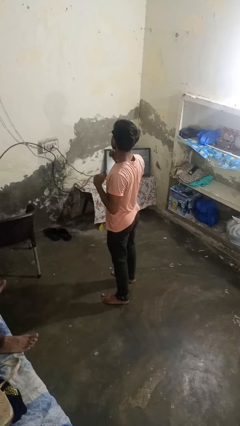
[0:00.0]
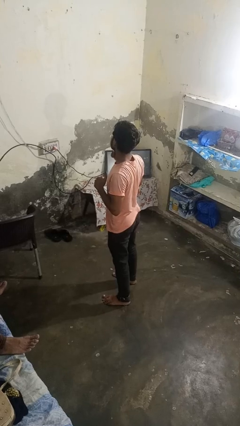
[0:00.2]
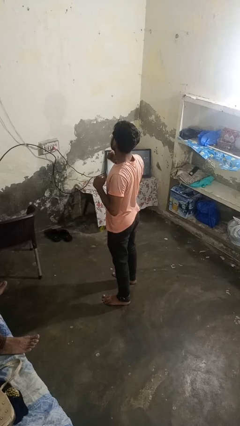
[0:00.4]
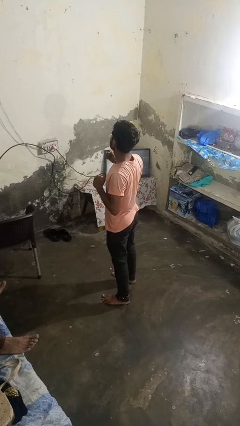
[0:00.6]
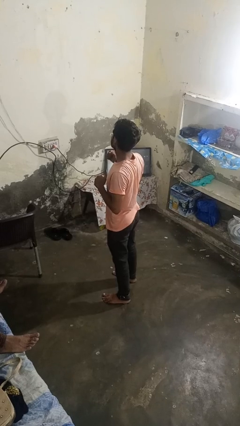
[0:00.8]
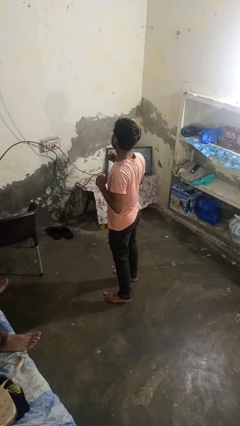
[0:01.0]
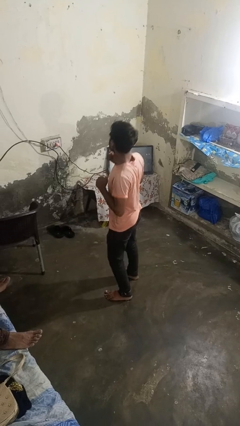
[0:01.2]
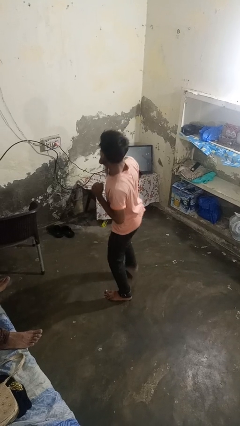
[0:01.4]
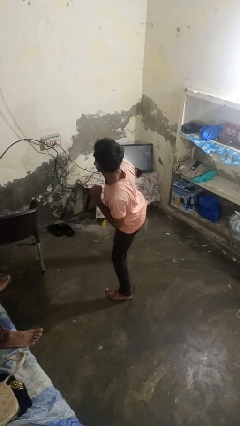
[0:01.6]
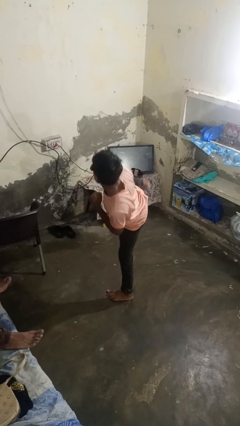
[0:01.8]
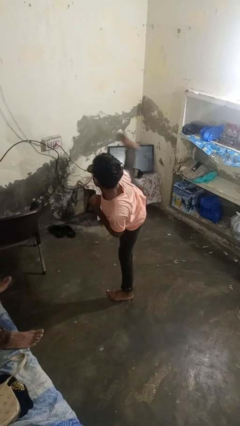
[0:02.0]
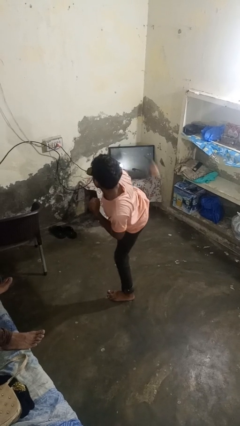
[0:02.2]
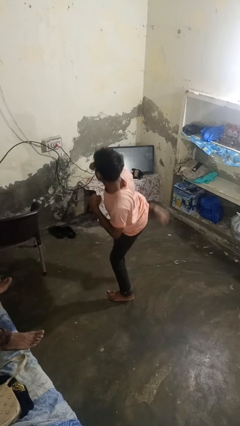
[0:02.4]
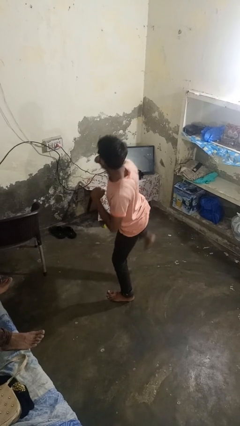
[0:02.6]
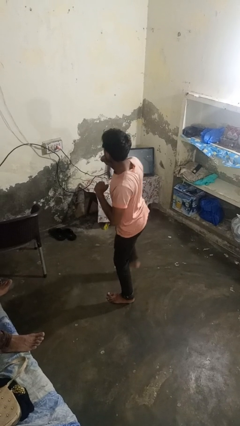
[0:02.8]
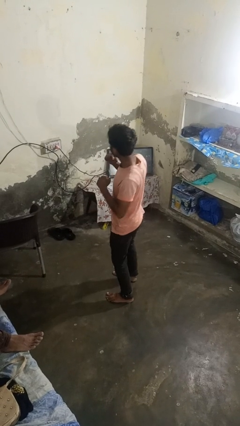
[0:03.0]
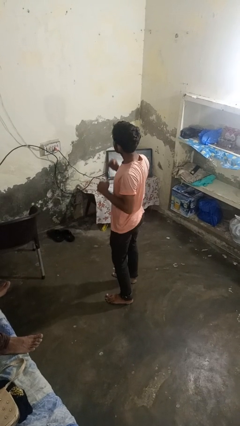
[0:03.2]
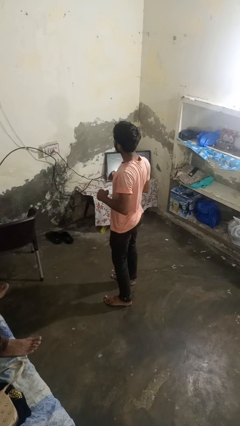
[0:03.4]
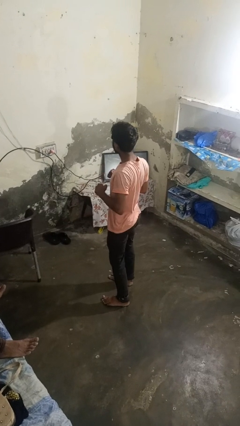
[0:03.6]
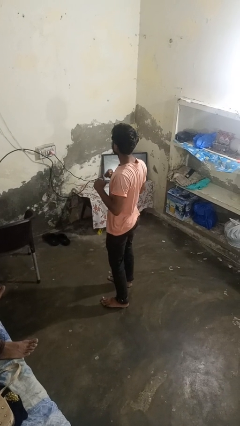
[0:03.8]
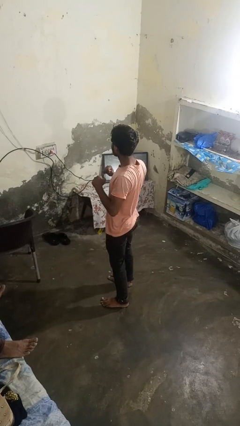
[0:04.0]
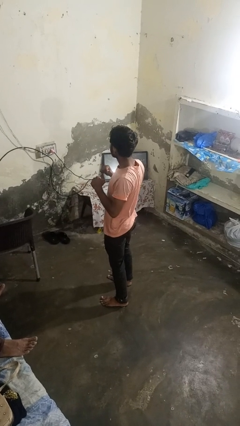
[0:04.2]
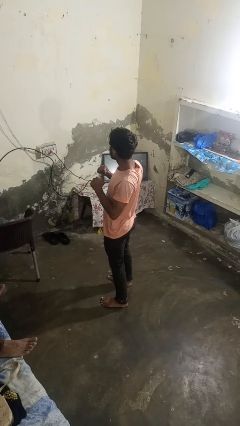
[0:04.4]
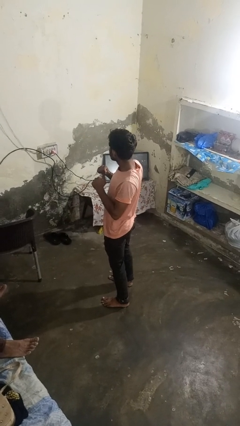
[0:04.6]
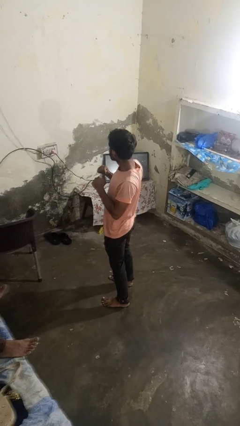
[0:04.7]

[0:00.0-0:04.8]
person karate kicks

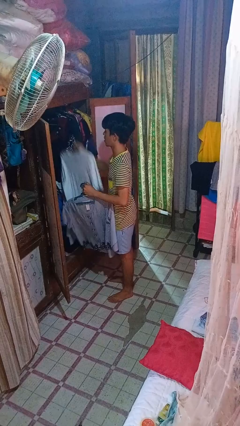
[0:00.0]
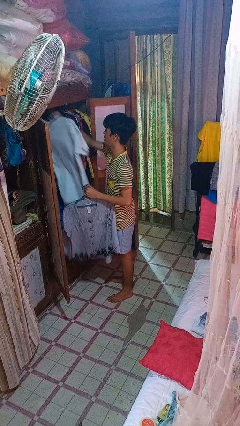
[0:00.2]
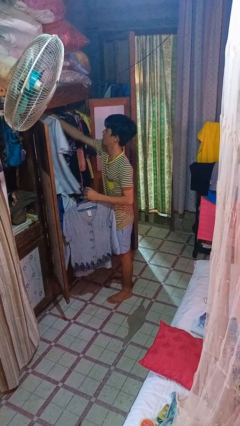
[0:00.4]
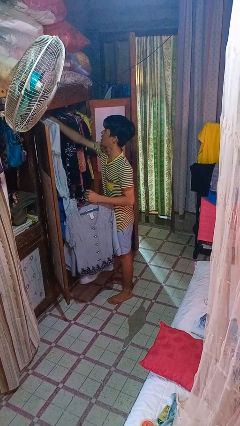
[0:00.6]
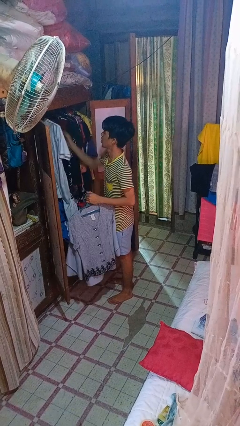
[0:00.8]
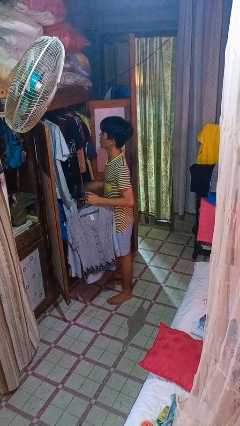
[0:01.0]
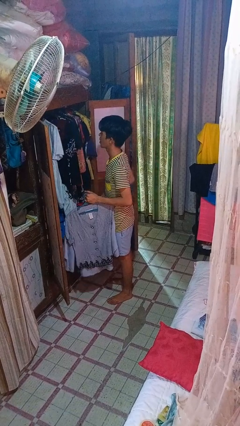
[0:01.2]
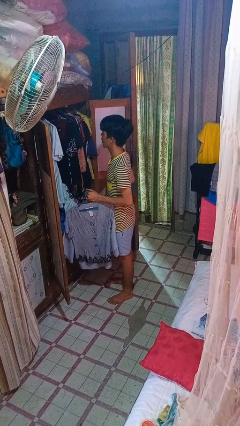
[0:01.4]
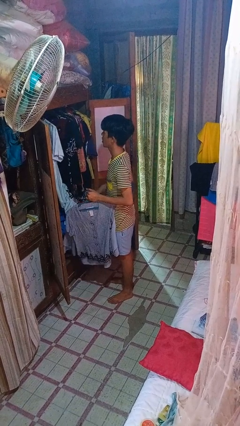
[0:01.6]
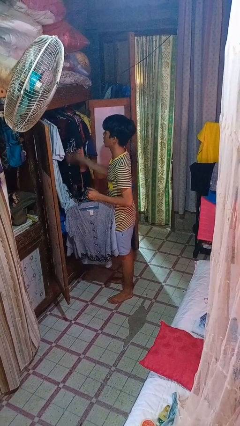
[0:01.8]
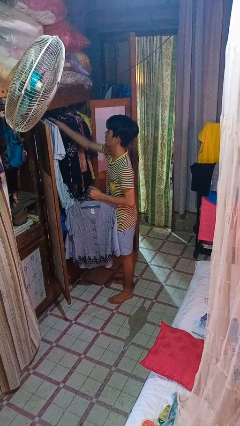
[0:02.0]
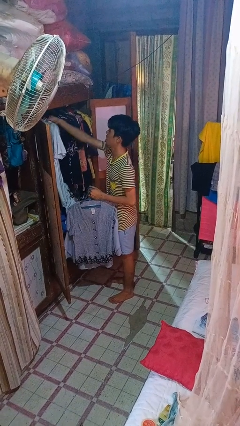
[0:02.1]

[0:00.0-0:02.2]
person puts clothes into closet

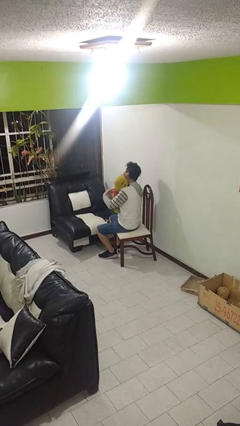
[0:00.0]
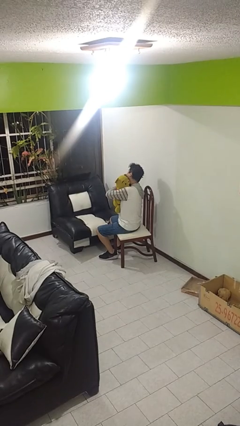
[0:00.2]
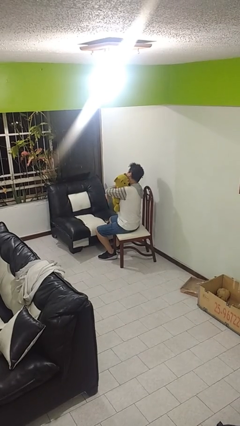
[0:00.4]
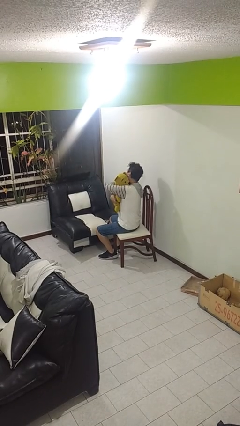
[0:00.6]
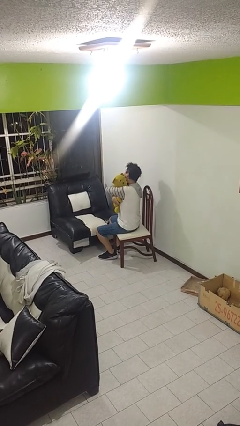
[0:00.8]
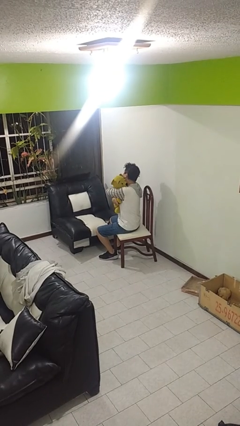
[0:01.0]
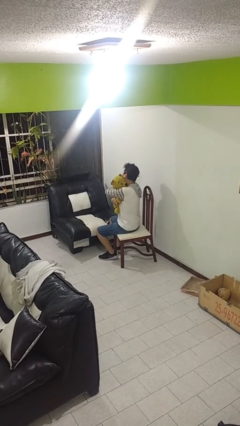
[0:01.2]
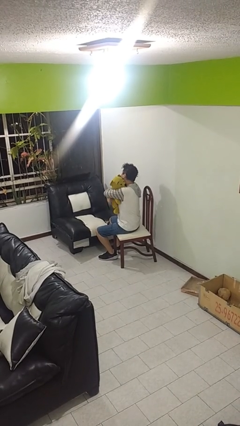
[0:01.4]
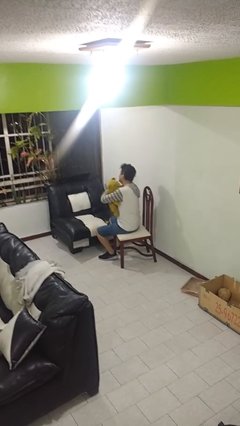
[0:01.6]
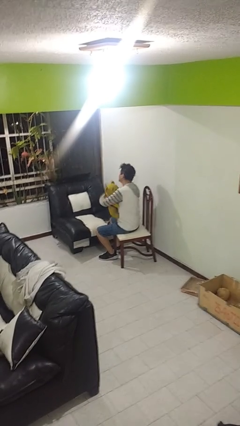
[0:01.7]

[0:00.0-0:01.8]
person hugs stuffed animal

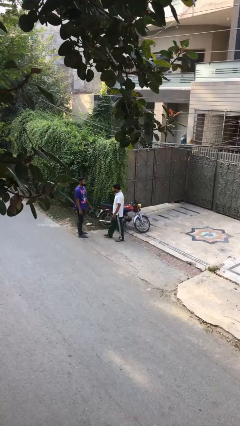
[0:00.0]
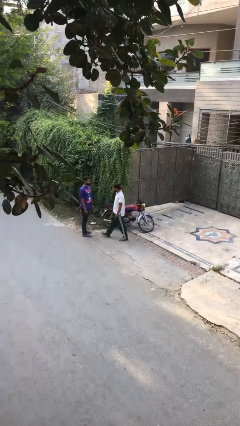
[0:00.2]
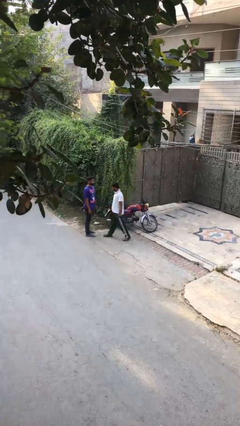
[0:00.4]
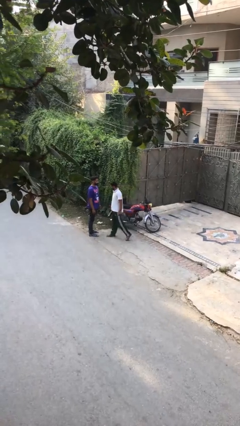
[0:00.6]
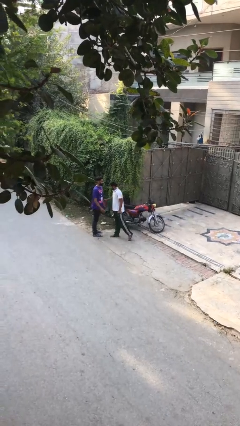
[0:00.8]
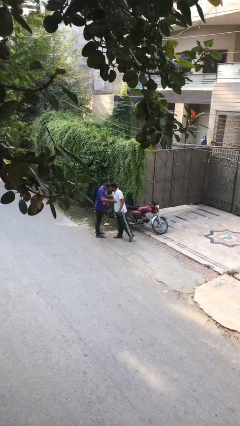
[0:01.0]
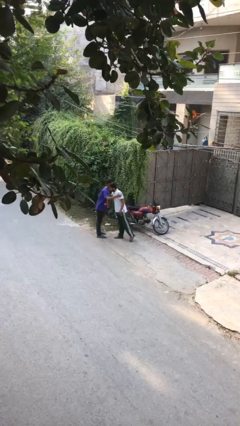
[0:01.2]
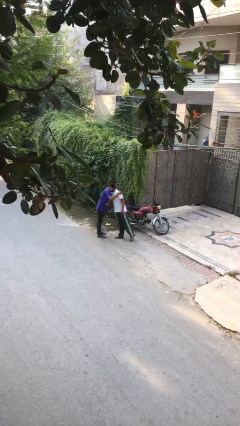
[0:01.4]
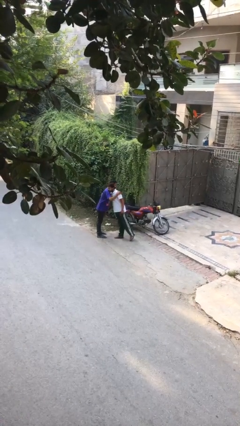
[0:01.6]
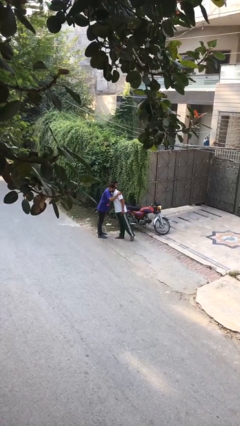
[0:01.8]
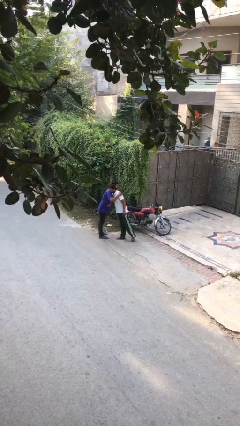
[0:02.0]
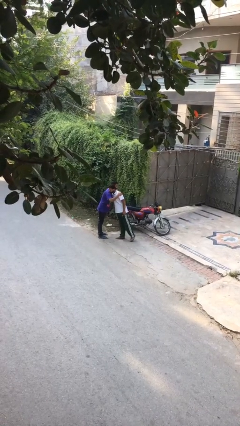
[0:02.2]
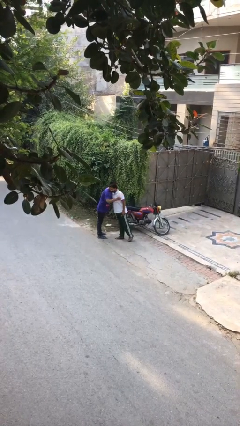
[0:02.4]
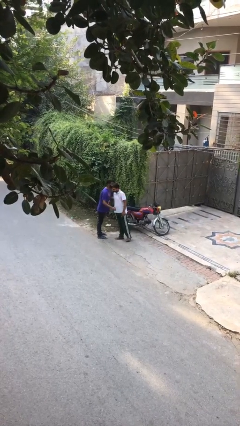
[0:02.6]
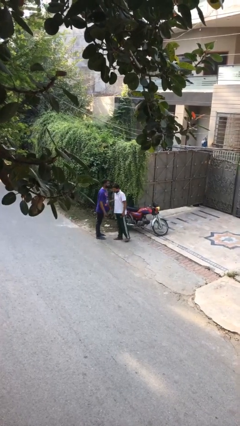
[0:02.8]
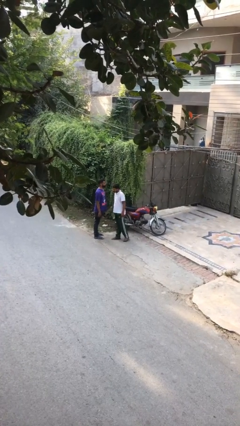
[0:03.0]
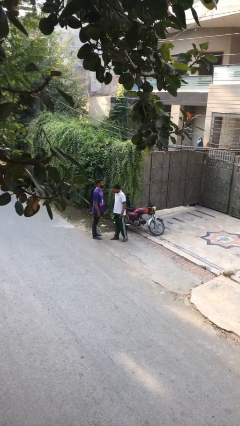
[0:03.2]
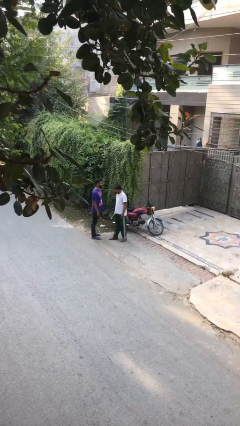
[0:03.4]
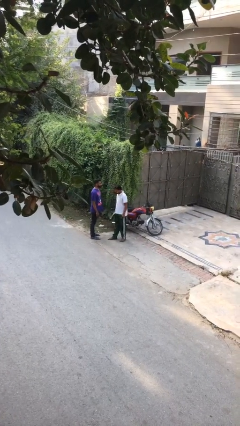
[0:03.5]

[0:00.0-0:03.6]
person embraces person

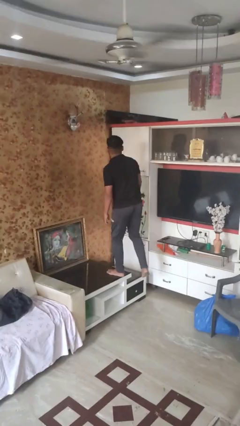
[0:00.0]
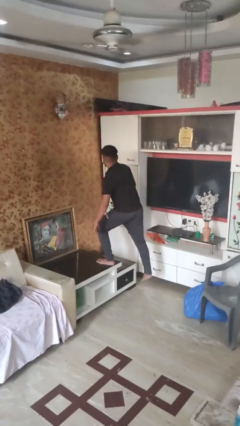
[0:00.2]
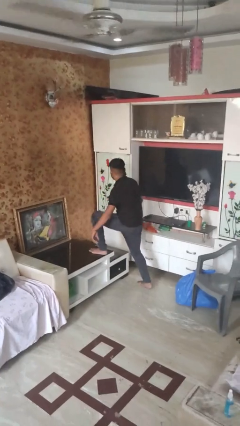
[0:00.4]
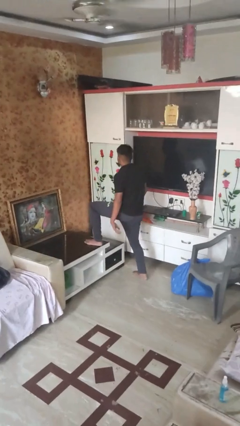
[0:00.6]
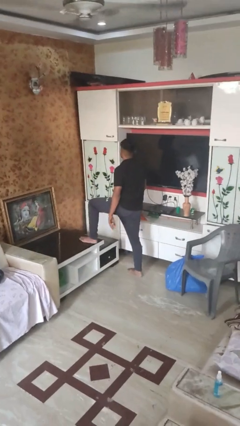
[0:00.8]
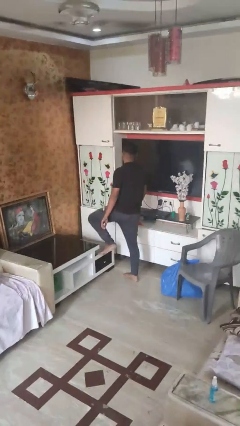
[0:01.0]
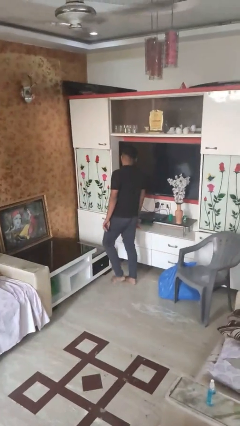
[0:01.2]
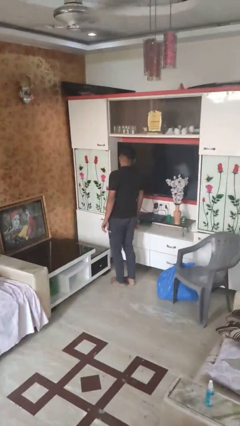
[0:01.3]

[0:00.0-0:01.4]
person climbs off table

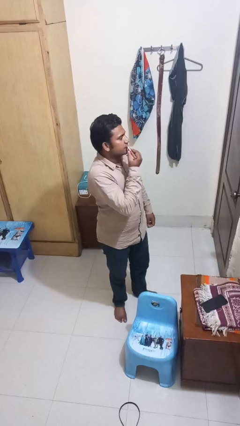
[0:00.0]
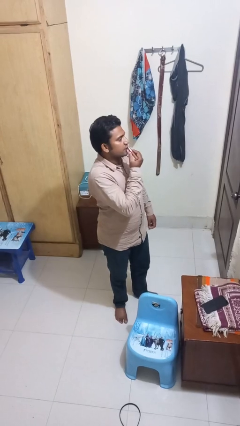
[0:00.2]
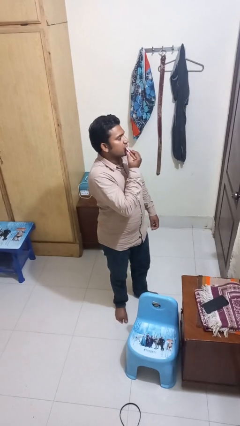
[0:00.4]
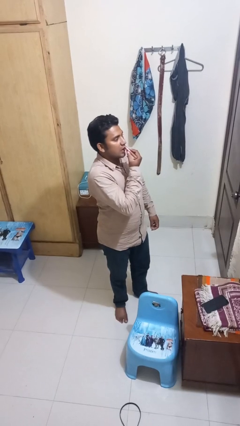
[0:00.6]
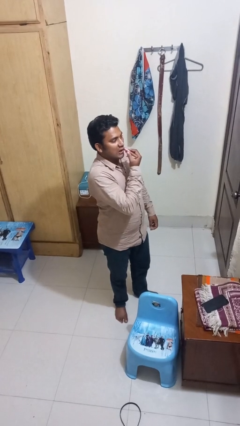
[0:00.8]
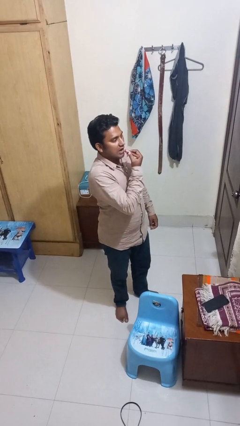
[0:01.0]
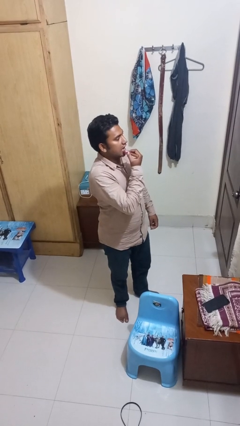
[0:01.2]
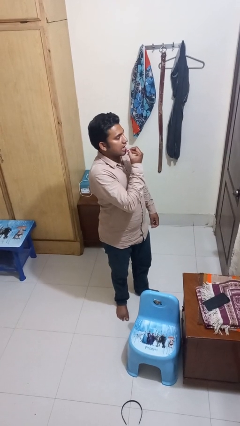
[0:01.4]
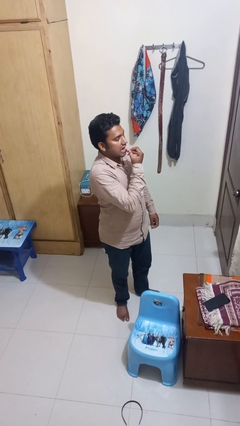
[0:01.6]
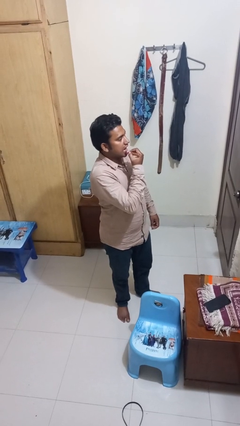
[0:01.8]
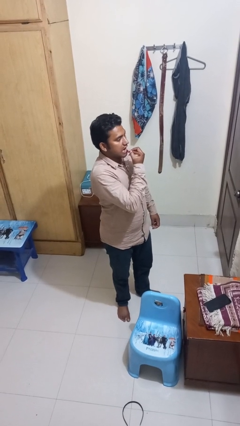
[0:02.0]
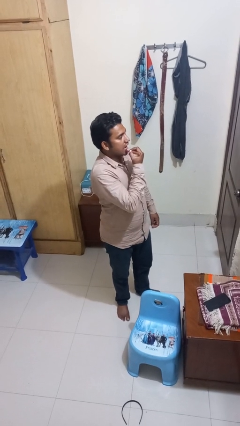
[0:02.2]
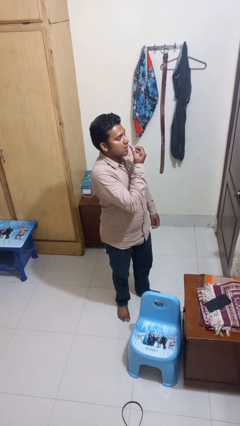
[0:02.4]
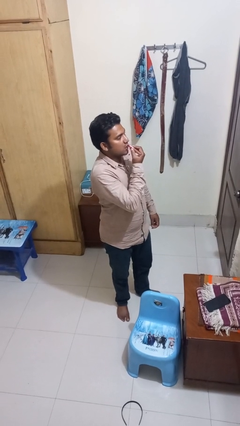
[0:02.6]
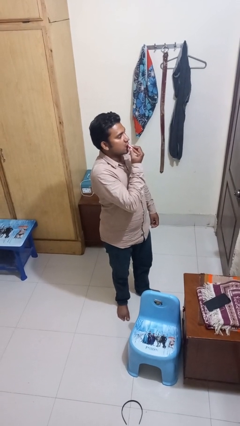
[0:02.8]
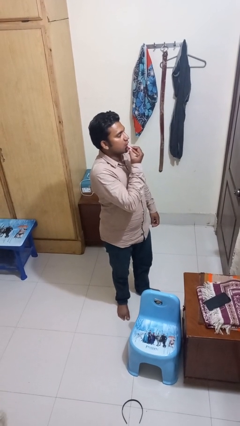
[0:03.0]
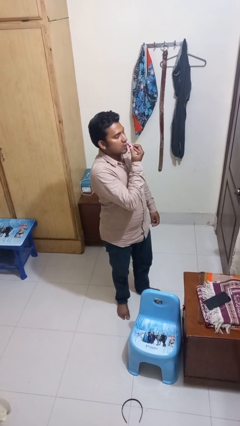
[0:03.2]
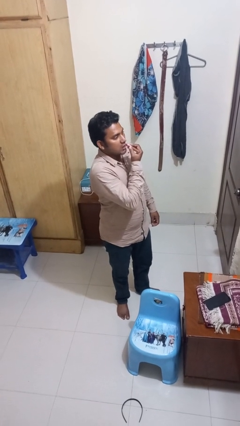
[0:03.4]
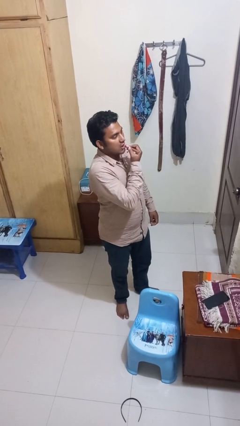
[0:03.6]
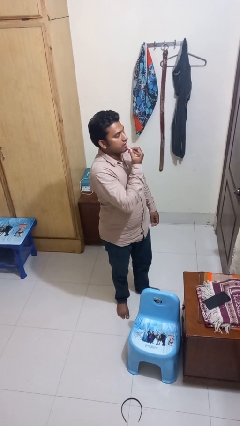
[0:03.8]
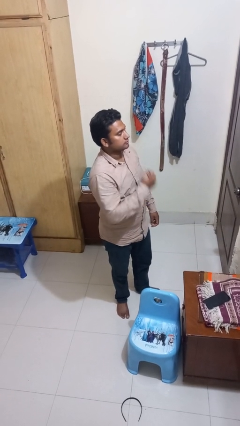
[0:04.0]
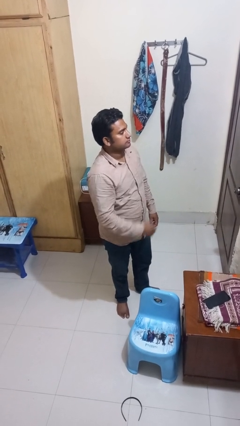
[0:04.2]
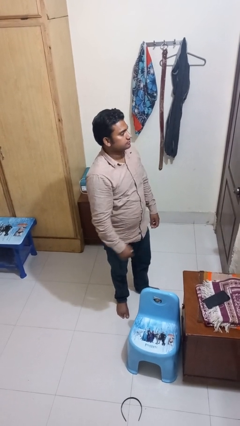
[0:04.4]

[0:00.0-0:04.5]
person applies lip makeup
